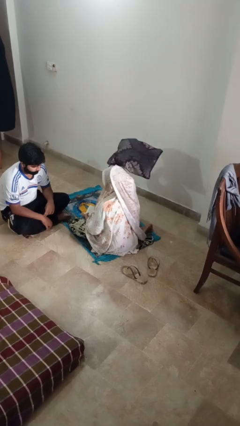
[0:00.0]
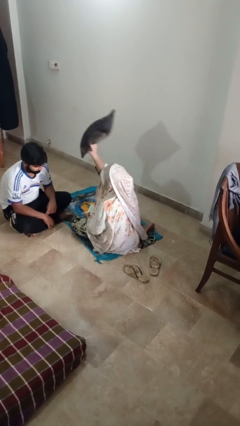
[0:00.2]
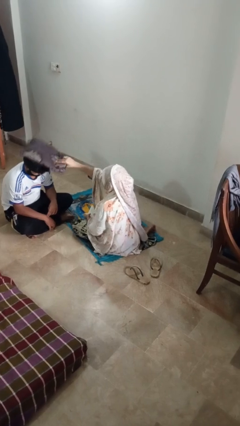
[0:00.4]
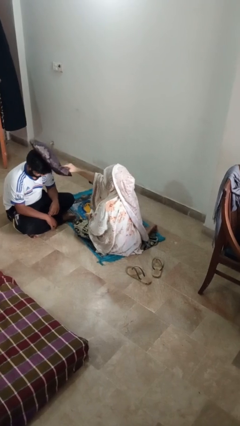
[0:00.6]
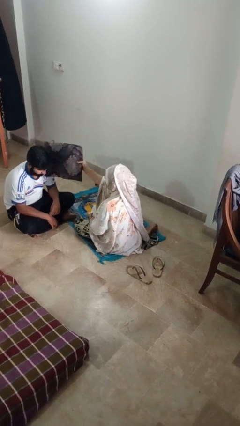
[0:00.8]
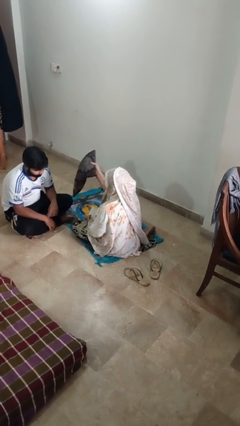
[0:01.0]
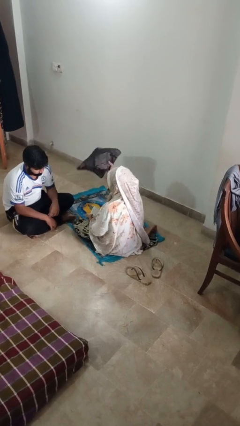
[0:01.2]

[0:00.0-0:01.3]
person hits person with pillow

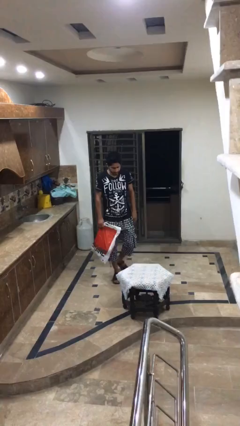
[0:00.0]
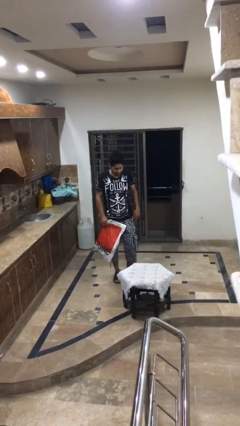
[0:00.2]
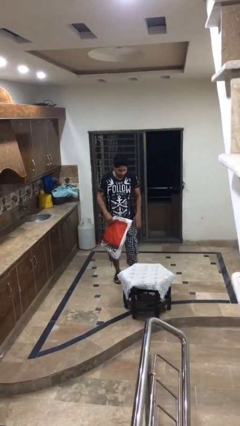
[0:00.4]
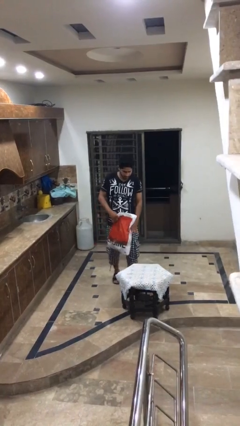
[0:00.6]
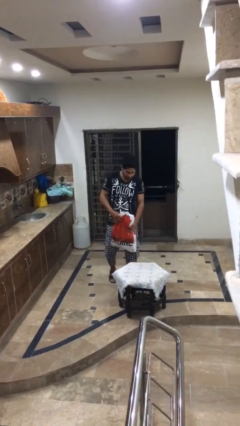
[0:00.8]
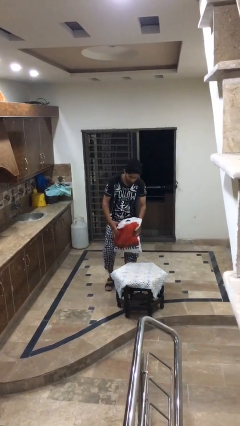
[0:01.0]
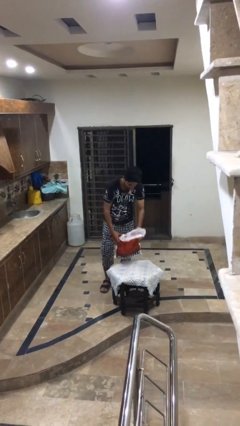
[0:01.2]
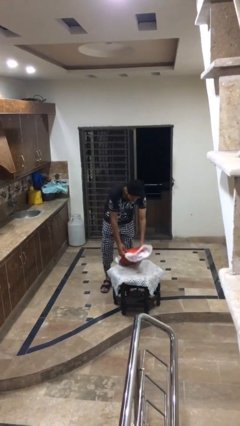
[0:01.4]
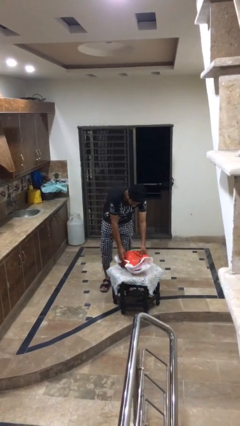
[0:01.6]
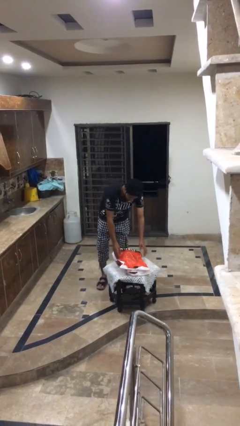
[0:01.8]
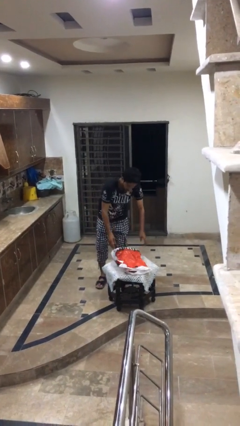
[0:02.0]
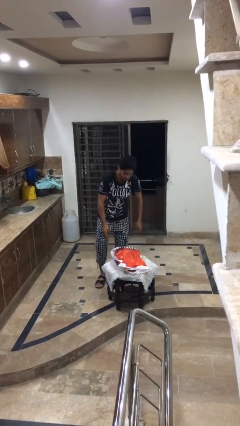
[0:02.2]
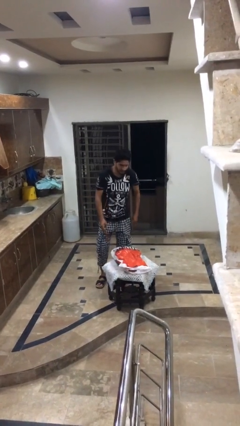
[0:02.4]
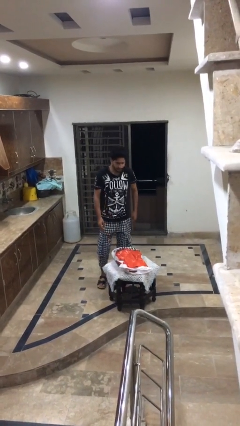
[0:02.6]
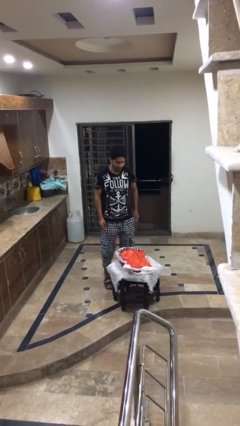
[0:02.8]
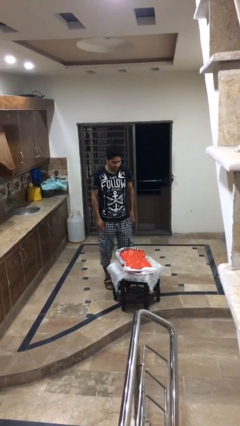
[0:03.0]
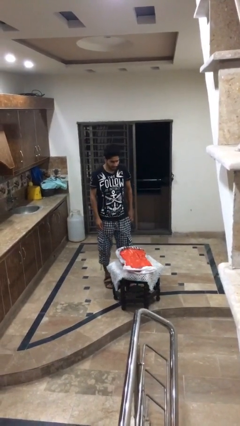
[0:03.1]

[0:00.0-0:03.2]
person puts down object on table

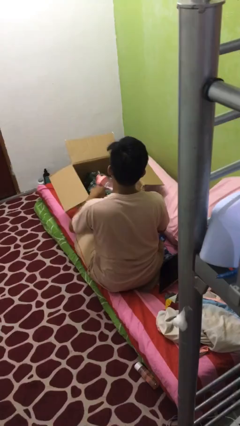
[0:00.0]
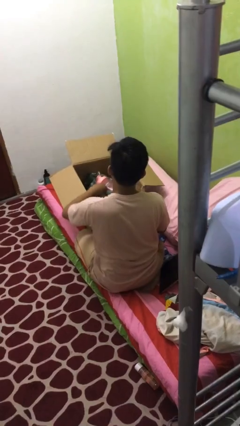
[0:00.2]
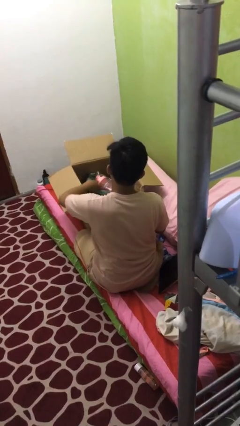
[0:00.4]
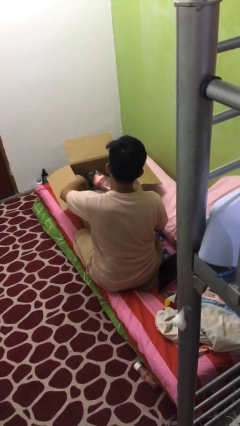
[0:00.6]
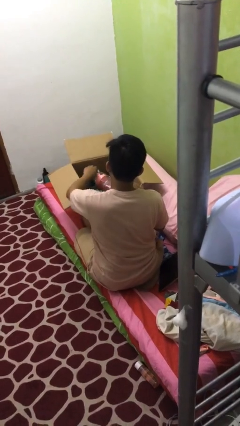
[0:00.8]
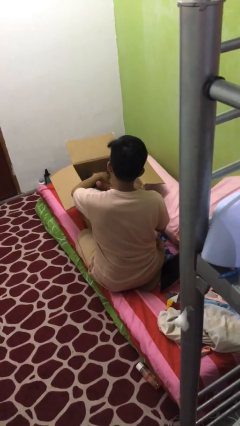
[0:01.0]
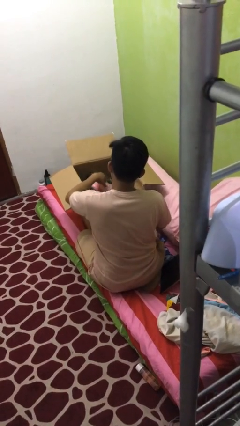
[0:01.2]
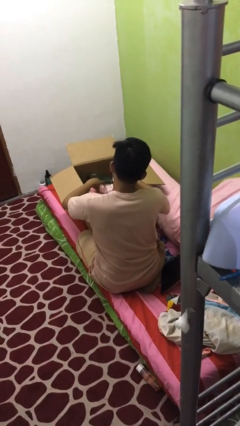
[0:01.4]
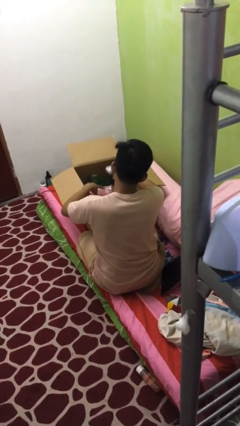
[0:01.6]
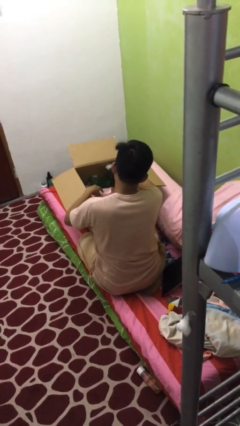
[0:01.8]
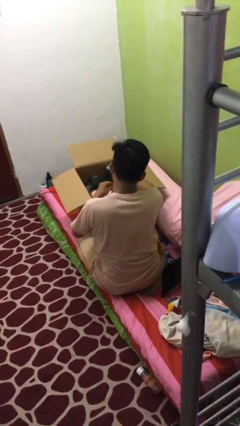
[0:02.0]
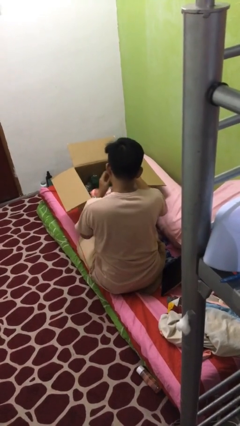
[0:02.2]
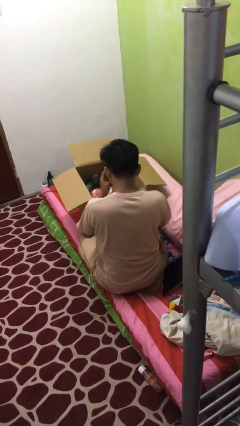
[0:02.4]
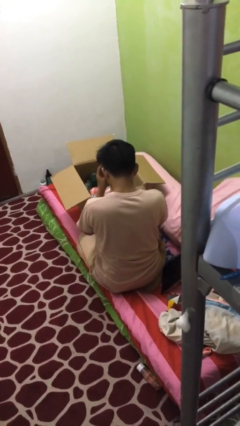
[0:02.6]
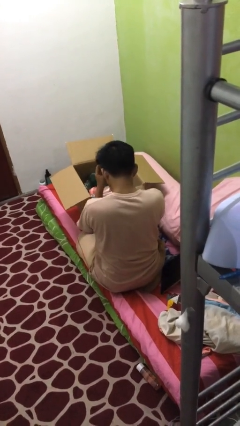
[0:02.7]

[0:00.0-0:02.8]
person searches in box

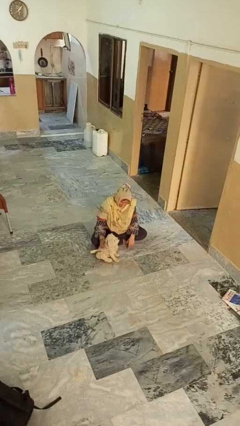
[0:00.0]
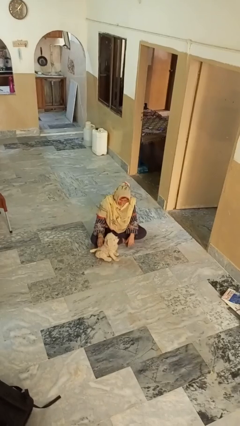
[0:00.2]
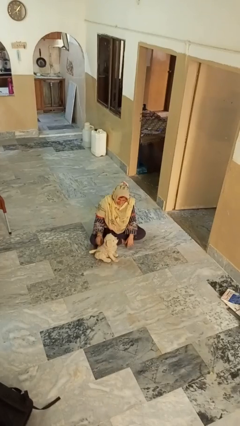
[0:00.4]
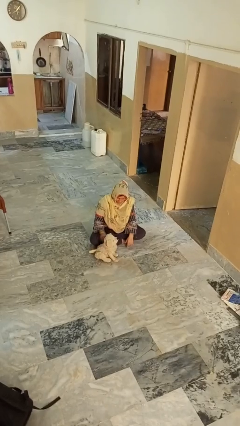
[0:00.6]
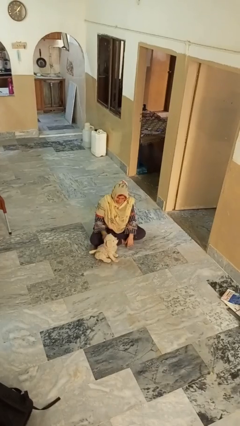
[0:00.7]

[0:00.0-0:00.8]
person pets dog

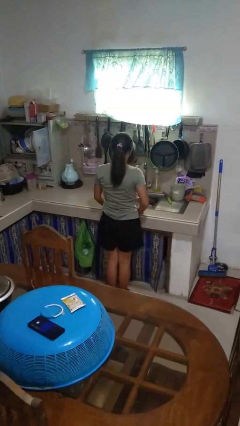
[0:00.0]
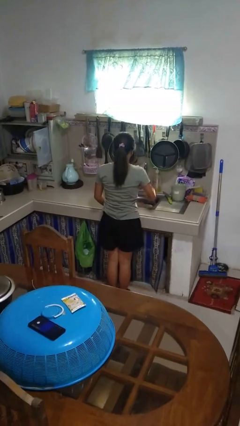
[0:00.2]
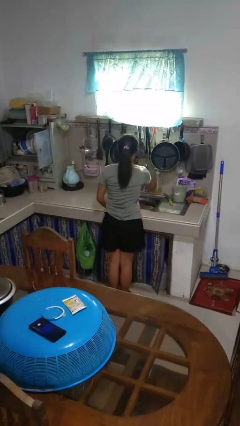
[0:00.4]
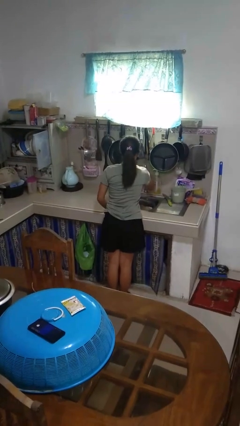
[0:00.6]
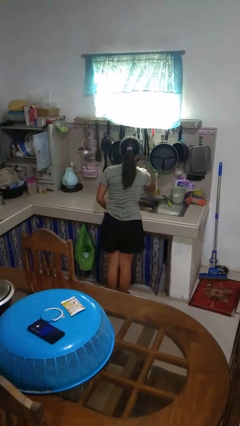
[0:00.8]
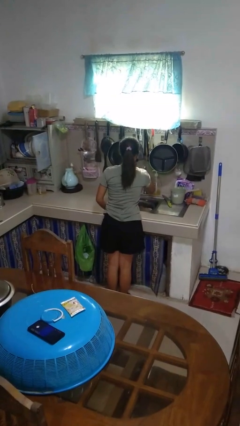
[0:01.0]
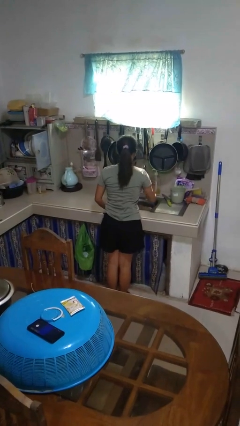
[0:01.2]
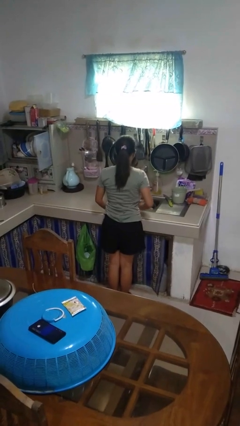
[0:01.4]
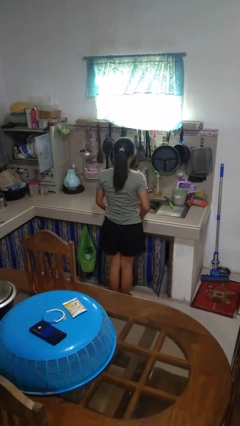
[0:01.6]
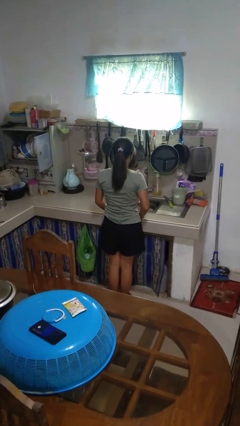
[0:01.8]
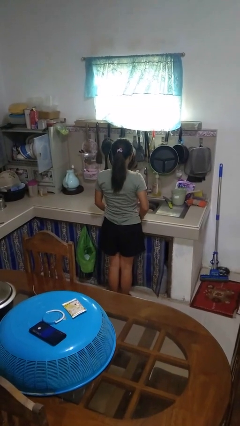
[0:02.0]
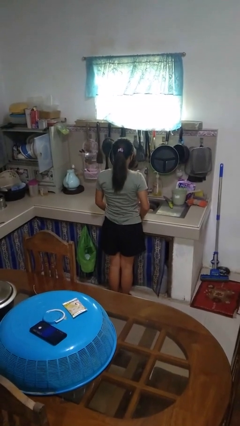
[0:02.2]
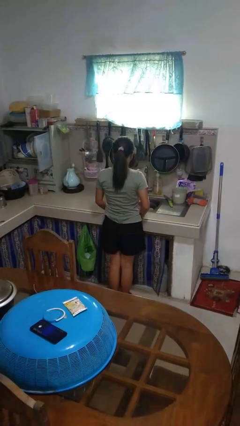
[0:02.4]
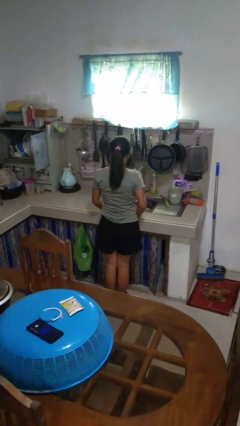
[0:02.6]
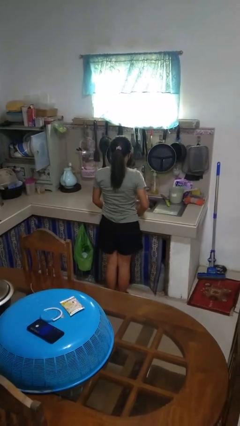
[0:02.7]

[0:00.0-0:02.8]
person turns on faucet

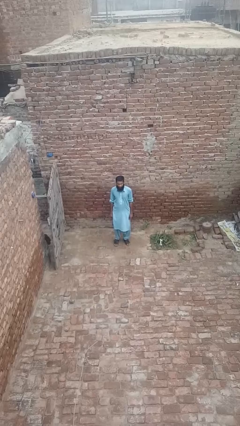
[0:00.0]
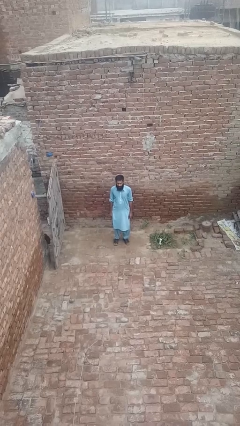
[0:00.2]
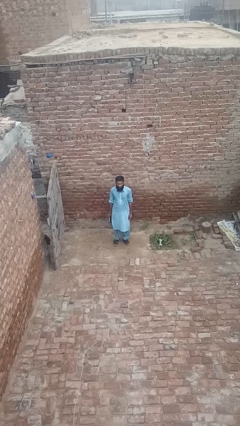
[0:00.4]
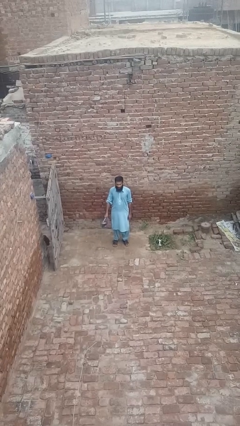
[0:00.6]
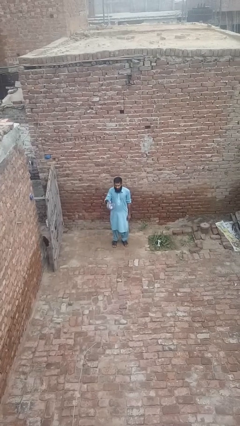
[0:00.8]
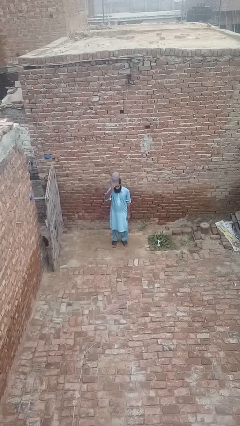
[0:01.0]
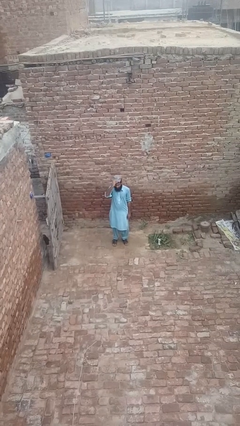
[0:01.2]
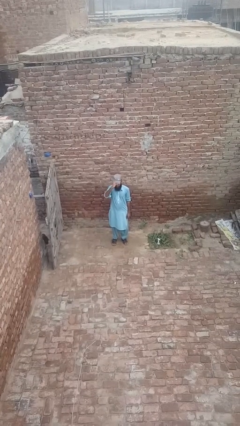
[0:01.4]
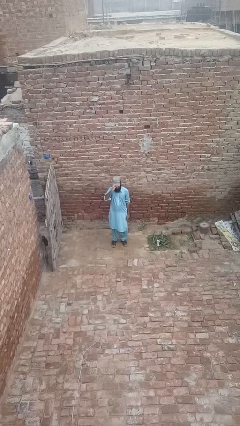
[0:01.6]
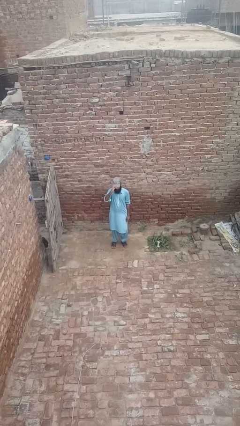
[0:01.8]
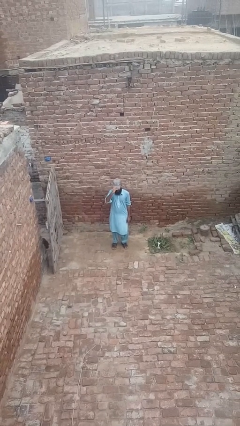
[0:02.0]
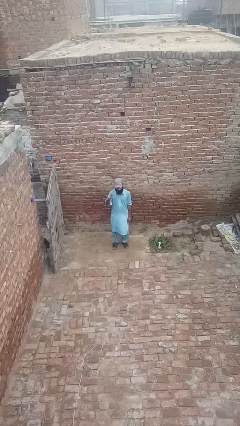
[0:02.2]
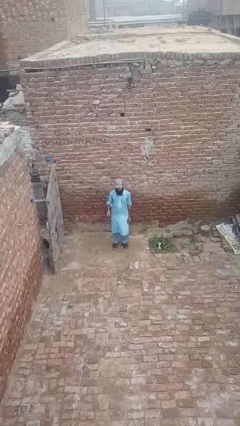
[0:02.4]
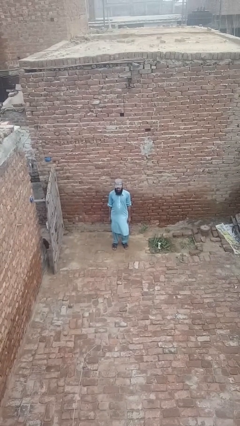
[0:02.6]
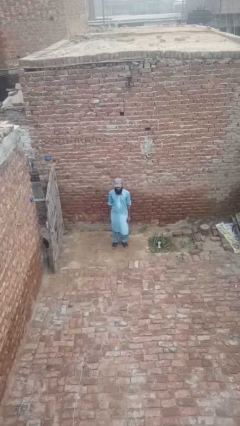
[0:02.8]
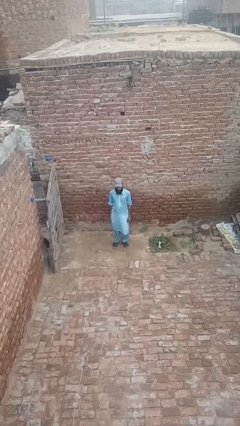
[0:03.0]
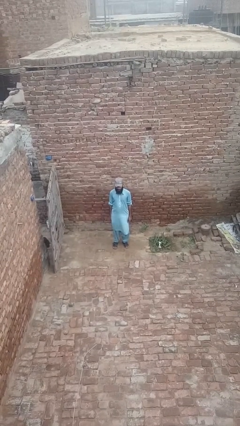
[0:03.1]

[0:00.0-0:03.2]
person puts on hat

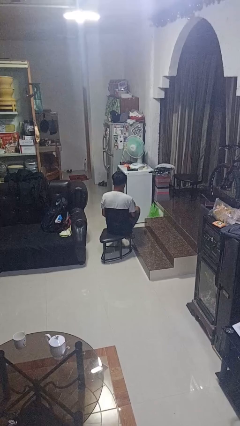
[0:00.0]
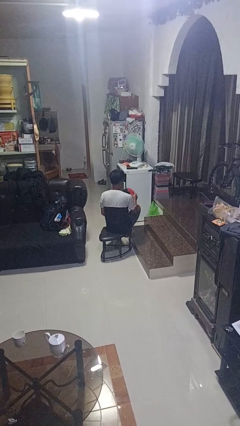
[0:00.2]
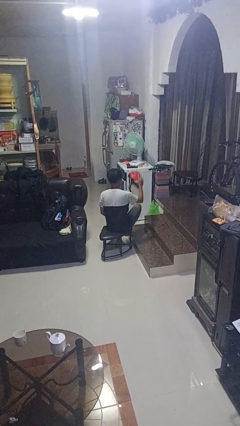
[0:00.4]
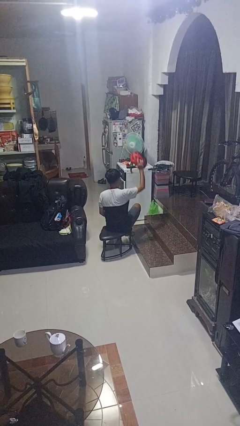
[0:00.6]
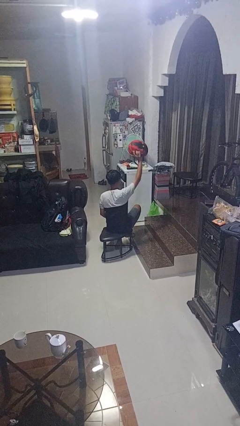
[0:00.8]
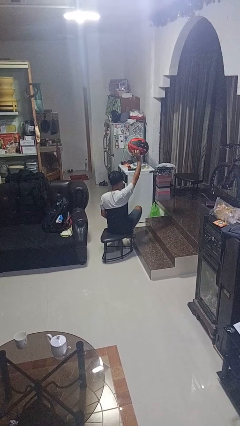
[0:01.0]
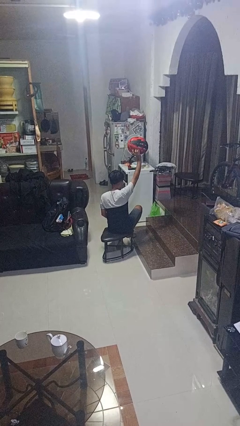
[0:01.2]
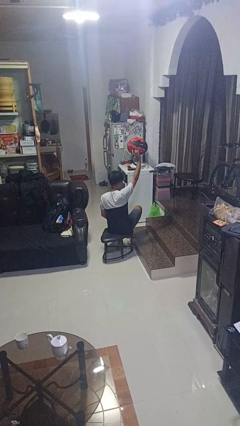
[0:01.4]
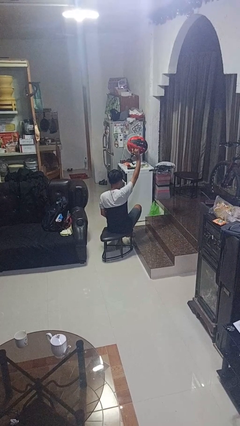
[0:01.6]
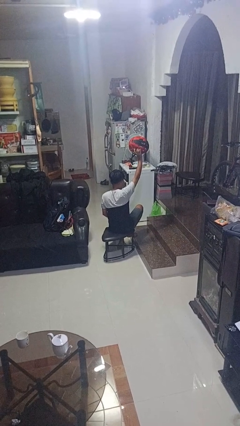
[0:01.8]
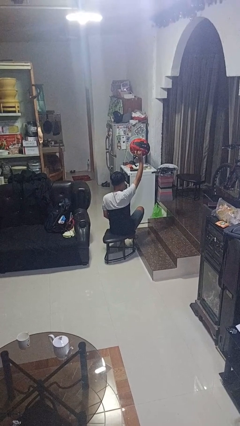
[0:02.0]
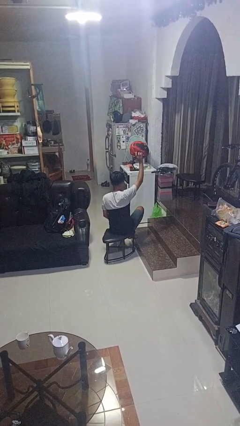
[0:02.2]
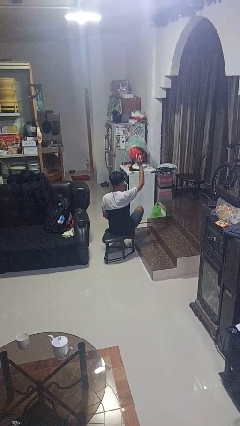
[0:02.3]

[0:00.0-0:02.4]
person holds object above head

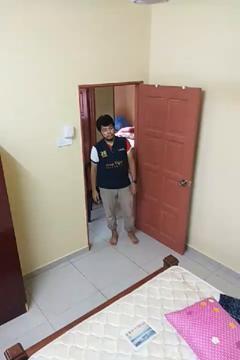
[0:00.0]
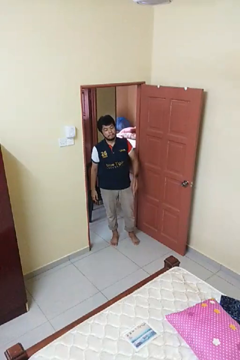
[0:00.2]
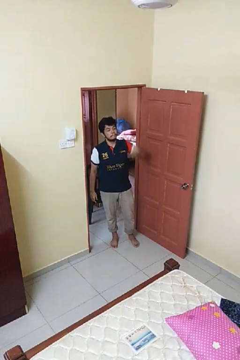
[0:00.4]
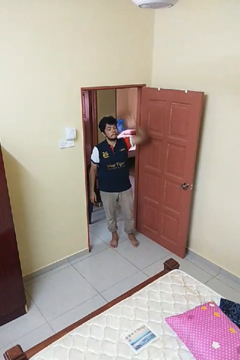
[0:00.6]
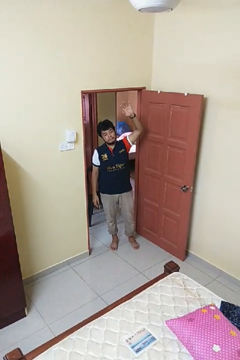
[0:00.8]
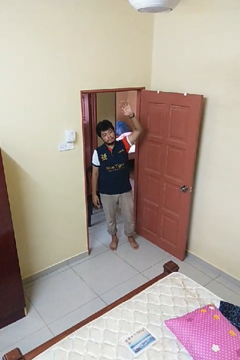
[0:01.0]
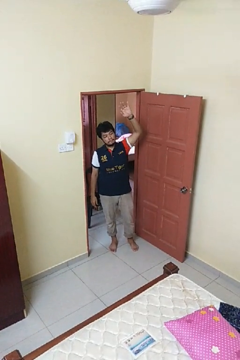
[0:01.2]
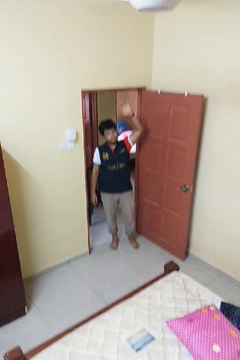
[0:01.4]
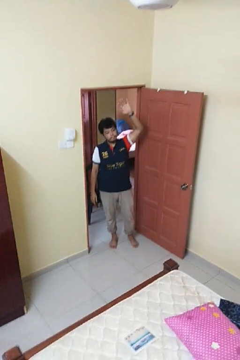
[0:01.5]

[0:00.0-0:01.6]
person gestures raise hand
